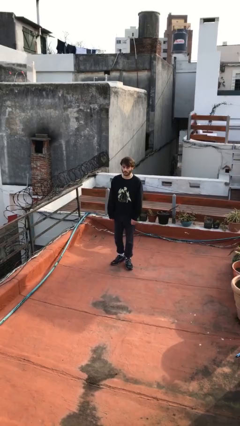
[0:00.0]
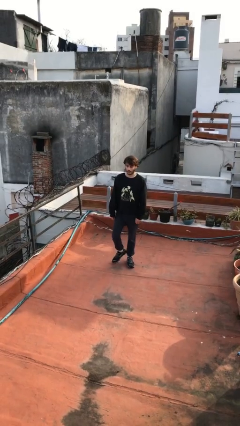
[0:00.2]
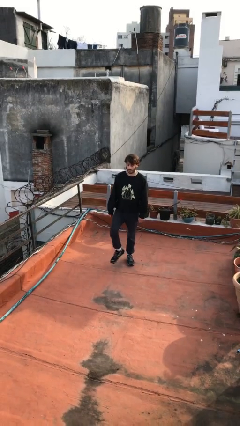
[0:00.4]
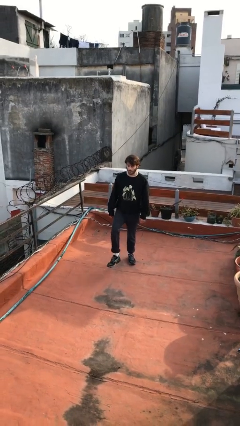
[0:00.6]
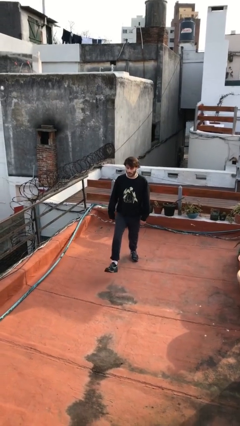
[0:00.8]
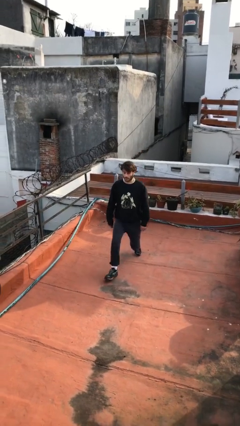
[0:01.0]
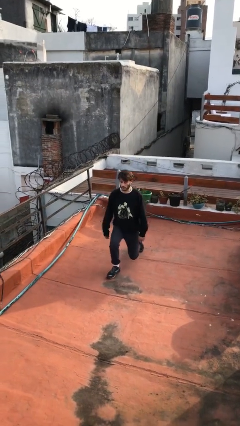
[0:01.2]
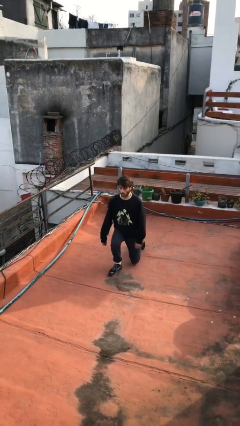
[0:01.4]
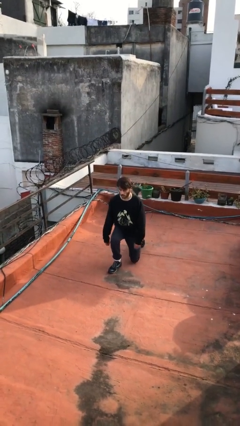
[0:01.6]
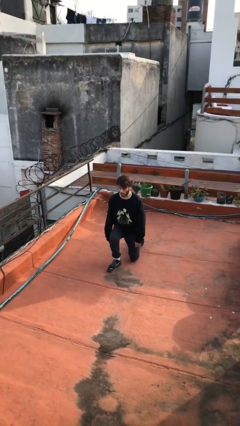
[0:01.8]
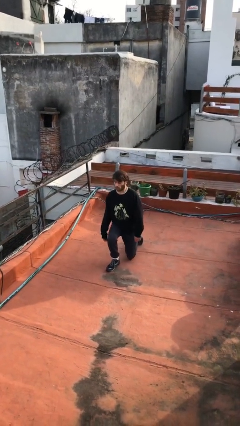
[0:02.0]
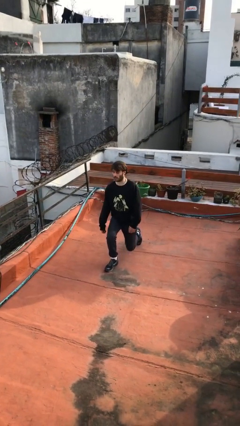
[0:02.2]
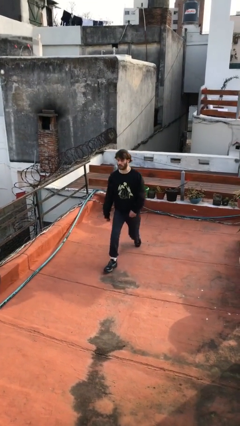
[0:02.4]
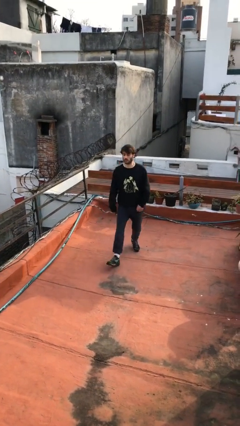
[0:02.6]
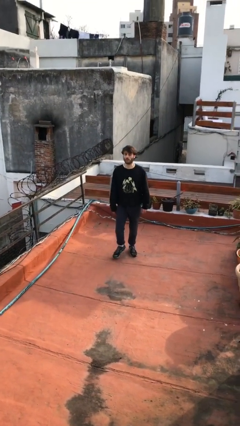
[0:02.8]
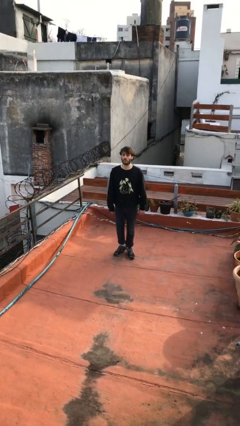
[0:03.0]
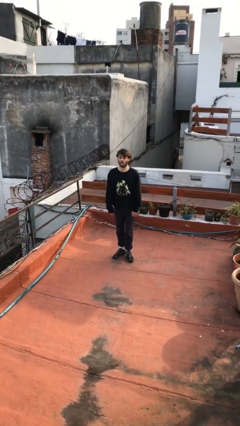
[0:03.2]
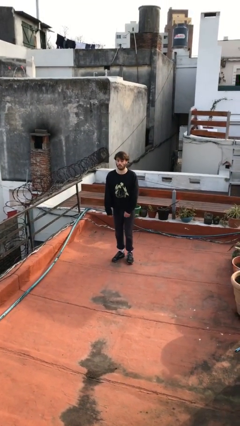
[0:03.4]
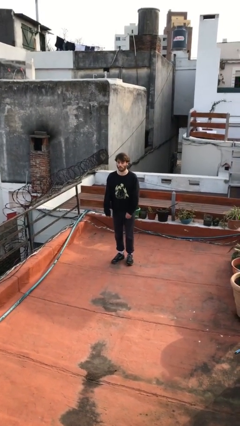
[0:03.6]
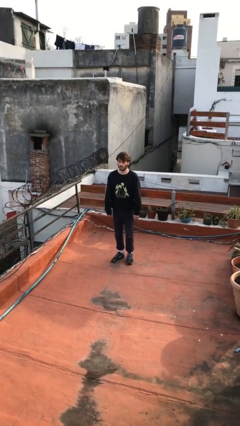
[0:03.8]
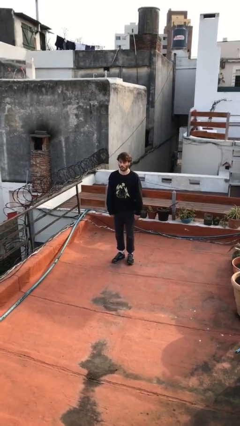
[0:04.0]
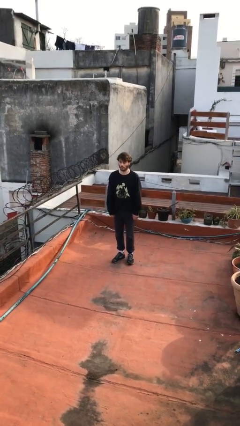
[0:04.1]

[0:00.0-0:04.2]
person exercises with lunges

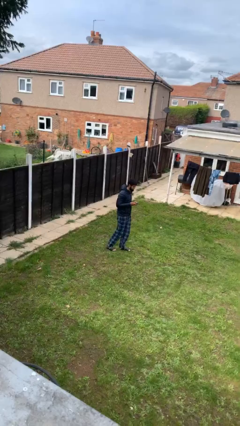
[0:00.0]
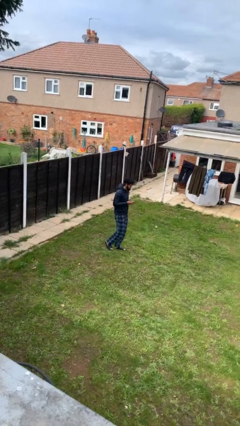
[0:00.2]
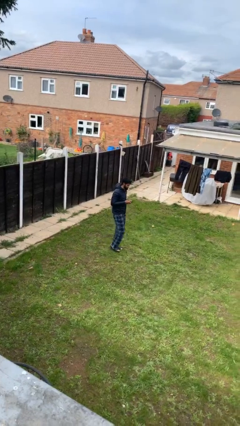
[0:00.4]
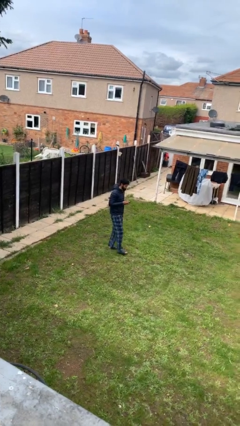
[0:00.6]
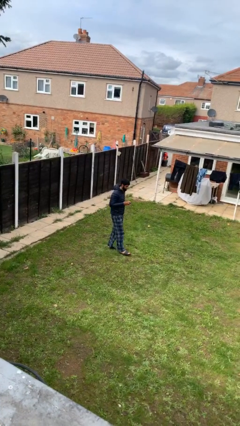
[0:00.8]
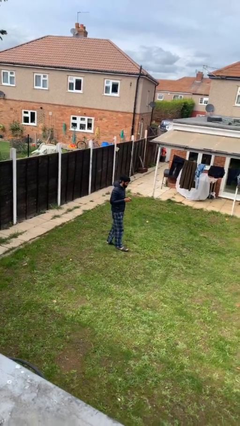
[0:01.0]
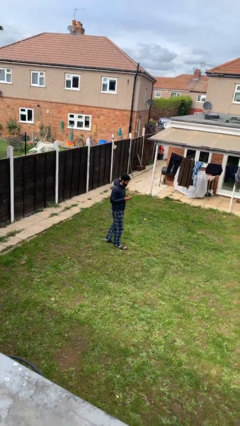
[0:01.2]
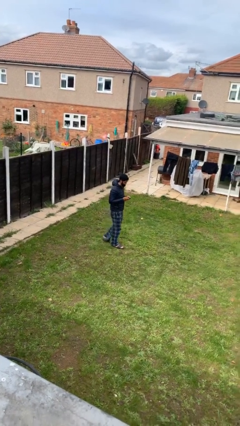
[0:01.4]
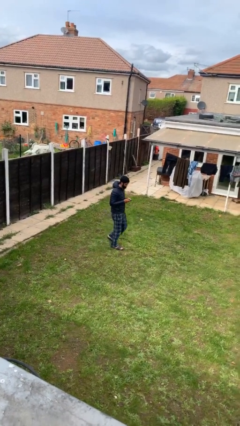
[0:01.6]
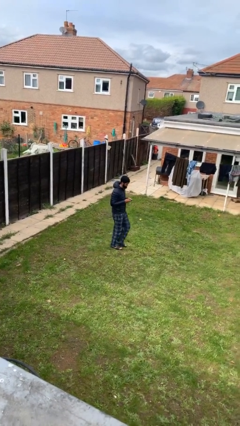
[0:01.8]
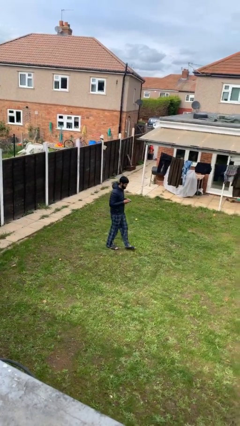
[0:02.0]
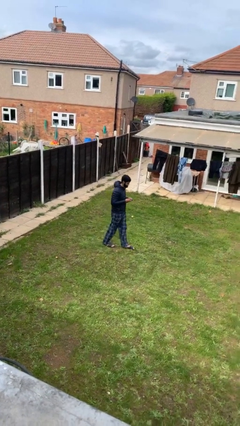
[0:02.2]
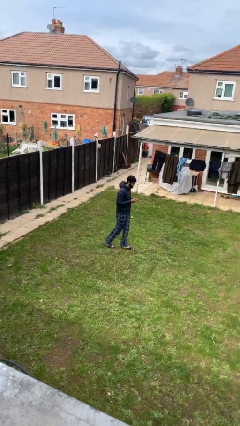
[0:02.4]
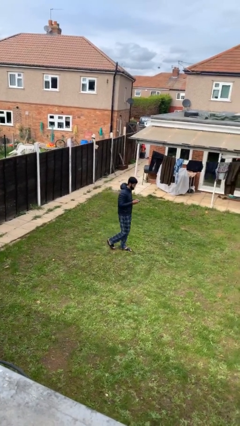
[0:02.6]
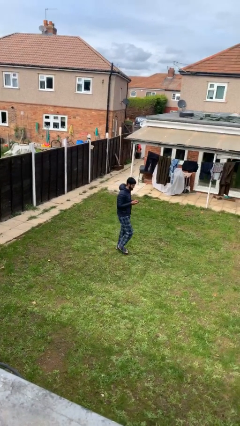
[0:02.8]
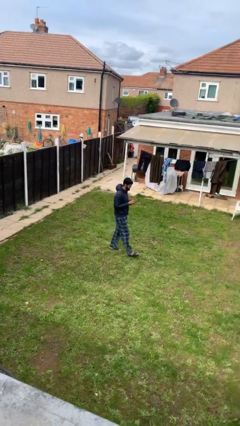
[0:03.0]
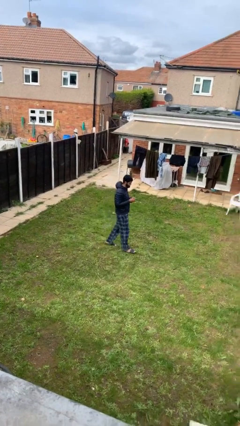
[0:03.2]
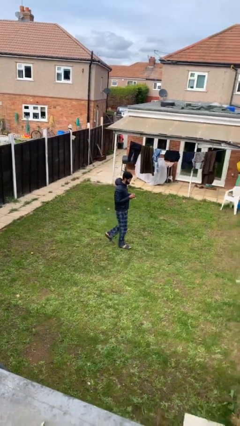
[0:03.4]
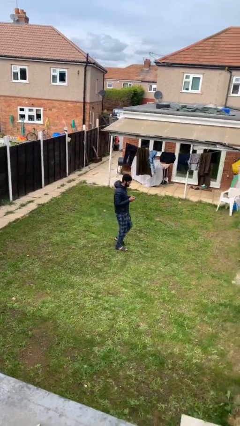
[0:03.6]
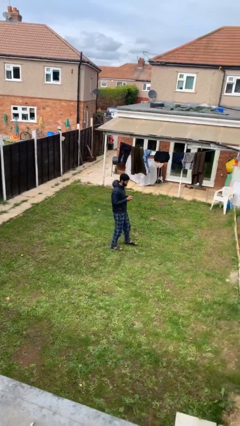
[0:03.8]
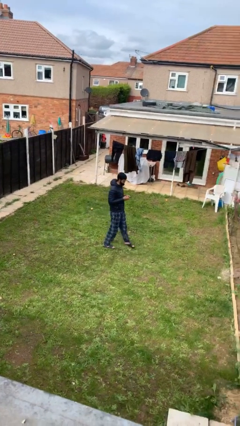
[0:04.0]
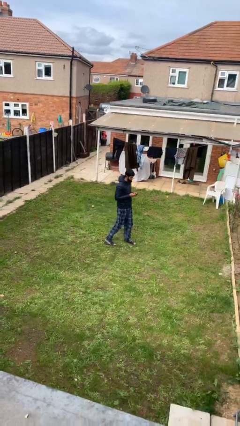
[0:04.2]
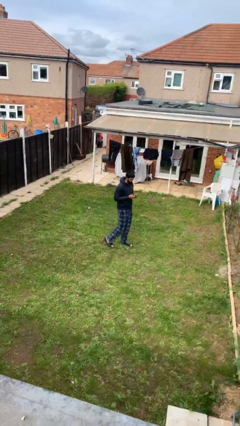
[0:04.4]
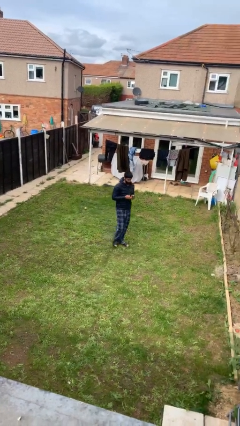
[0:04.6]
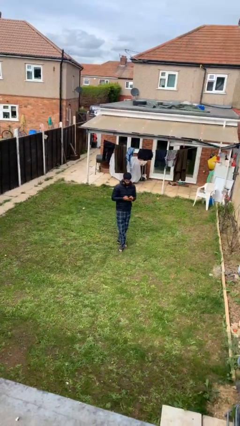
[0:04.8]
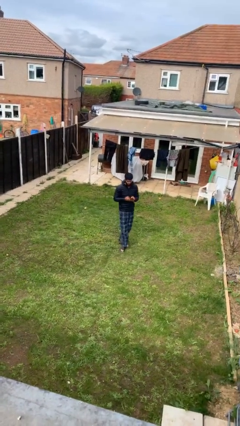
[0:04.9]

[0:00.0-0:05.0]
person texts on phone

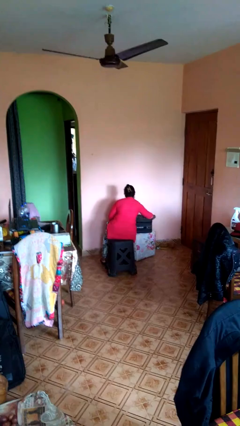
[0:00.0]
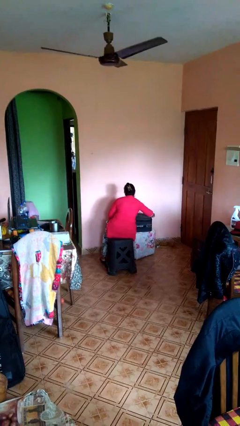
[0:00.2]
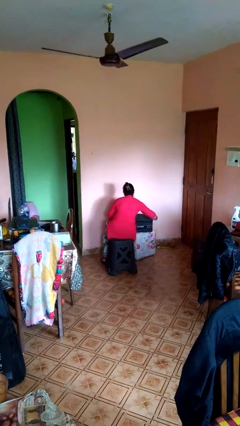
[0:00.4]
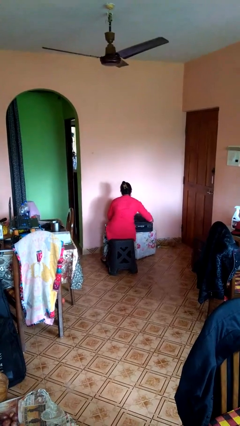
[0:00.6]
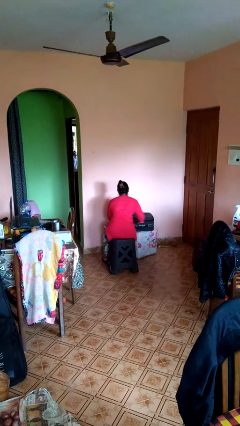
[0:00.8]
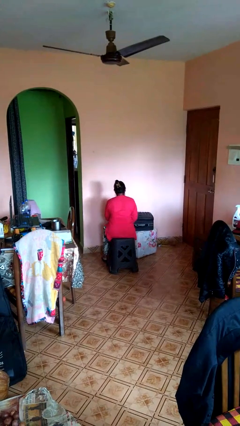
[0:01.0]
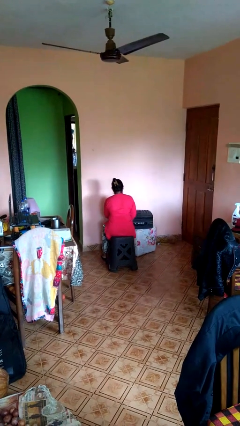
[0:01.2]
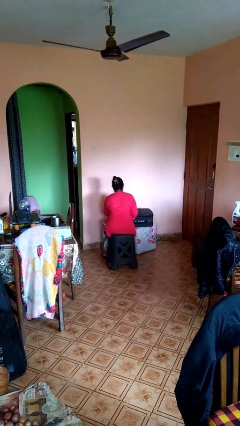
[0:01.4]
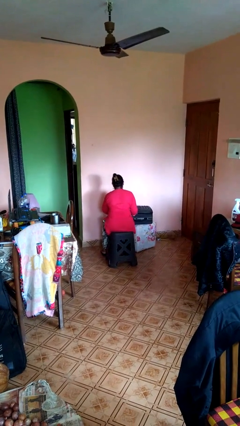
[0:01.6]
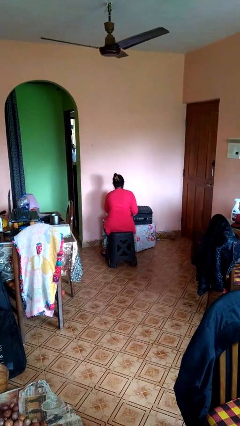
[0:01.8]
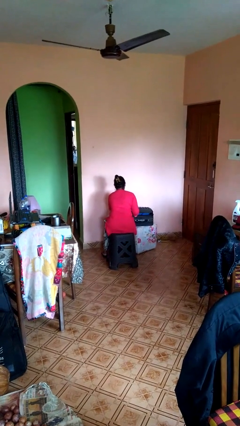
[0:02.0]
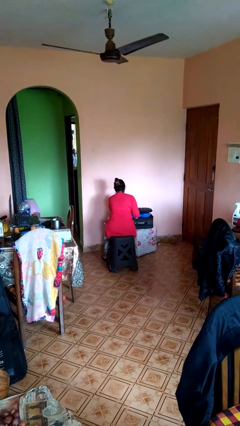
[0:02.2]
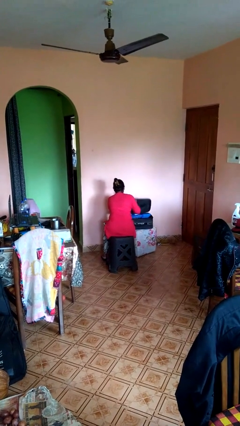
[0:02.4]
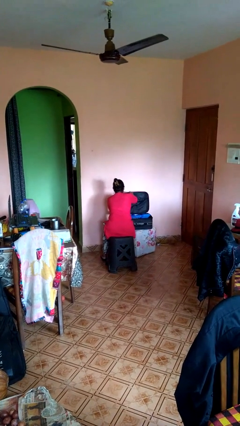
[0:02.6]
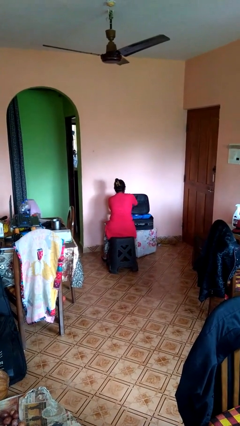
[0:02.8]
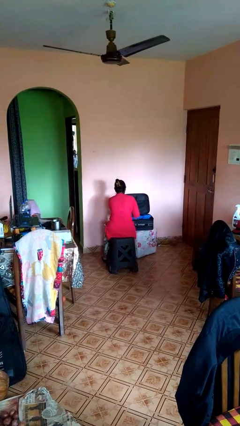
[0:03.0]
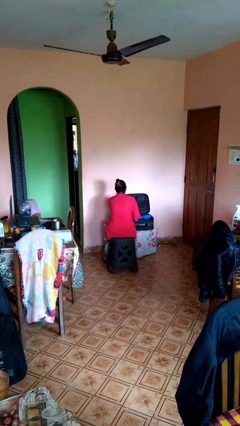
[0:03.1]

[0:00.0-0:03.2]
person opens suitcase

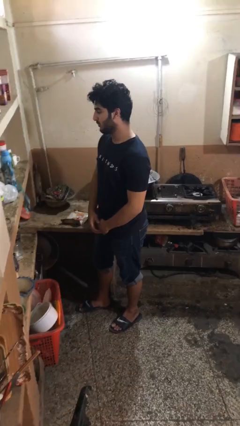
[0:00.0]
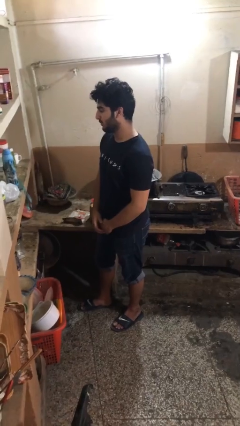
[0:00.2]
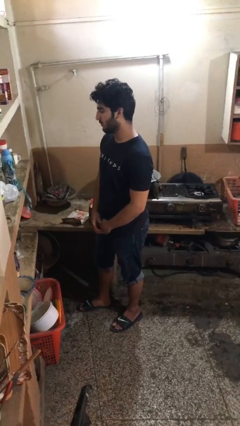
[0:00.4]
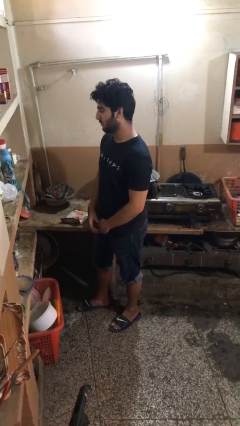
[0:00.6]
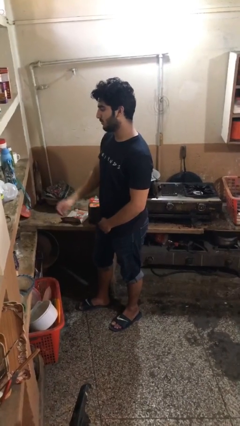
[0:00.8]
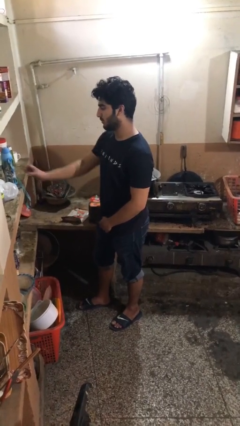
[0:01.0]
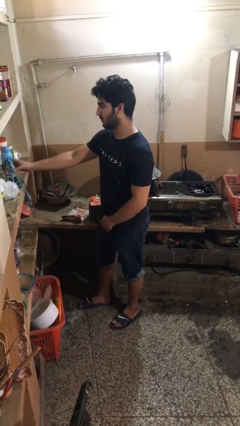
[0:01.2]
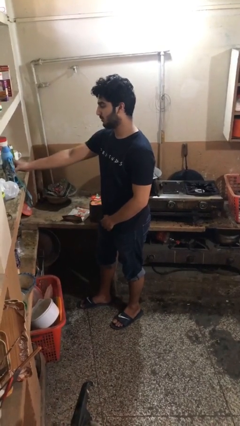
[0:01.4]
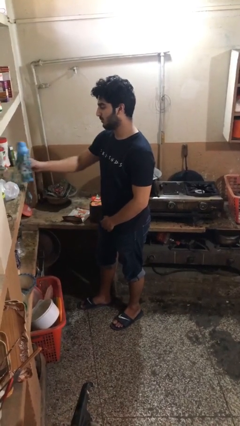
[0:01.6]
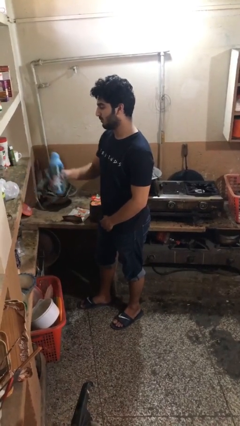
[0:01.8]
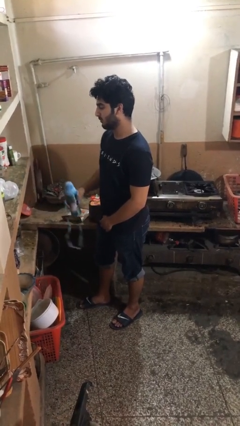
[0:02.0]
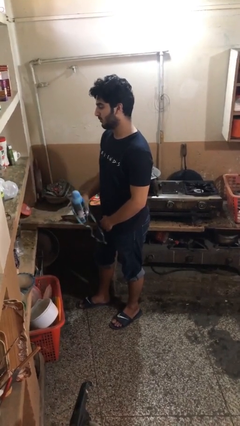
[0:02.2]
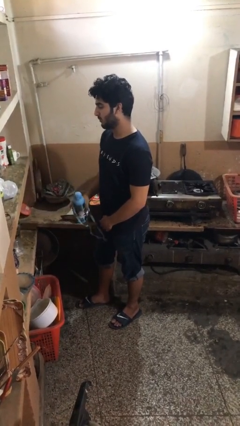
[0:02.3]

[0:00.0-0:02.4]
person picks up object from countertop

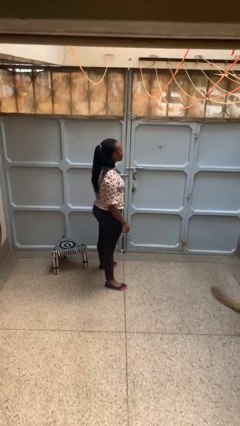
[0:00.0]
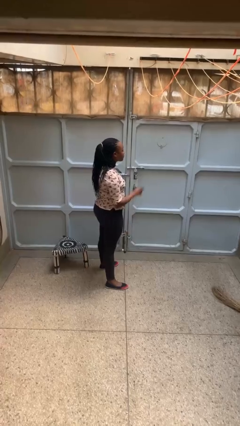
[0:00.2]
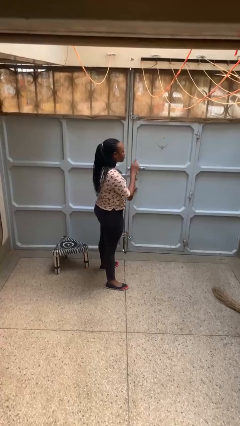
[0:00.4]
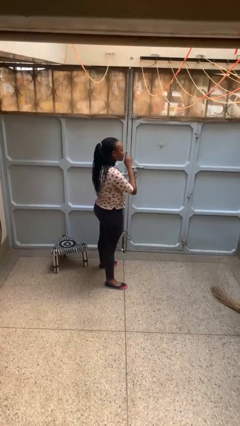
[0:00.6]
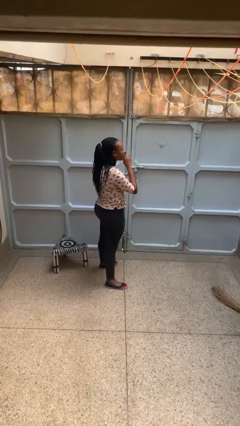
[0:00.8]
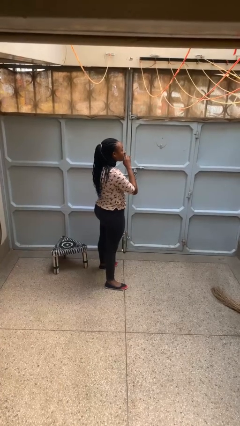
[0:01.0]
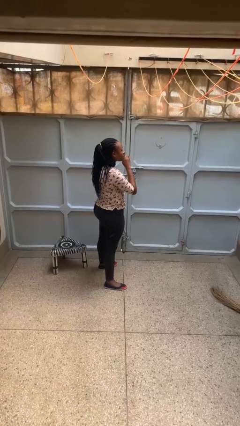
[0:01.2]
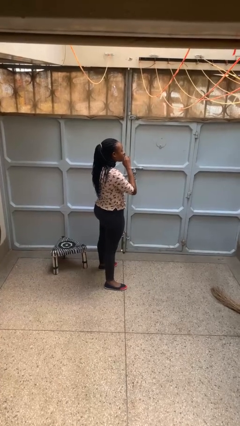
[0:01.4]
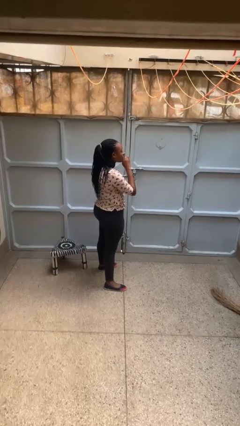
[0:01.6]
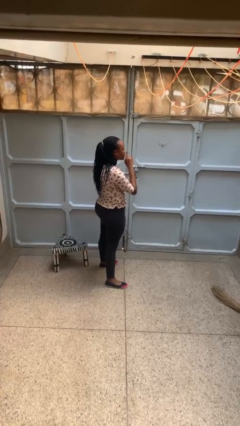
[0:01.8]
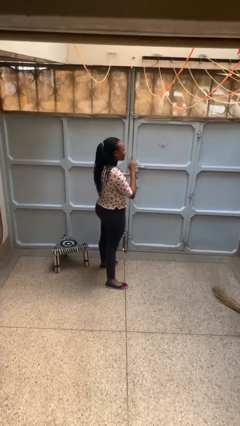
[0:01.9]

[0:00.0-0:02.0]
person gestures be quiet

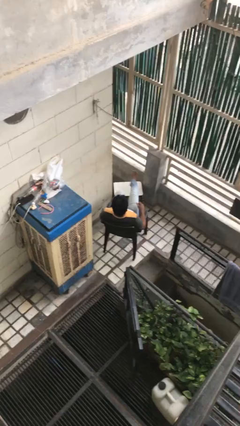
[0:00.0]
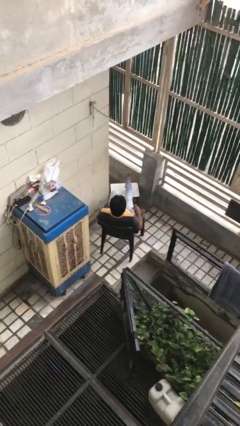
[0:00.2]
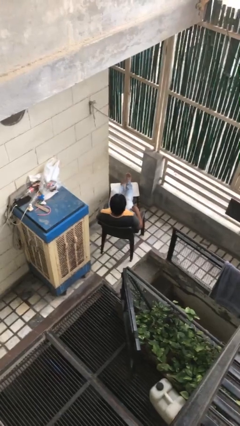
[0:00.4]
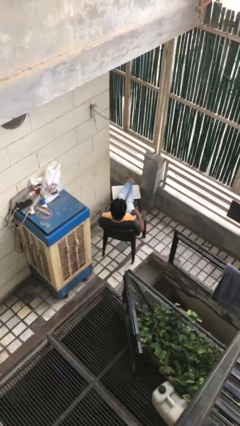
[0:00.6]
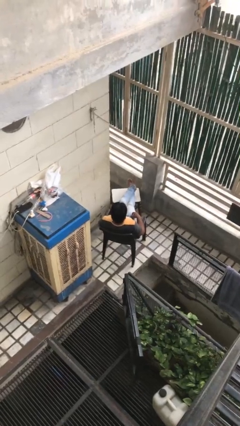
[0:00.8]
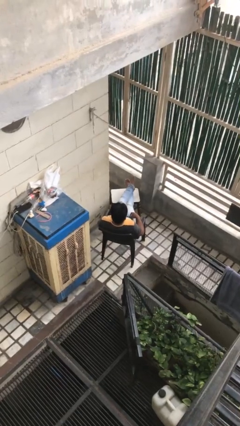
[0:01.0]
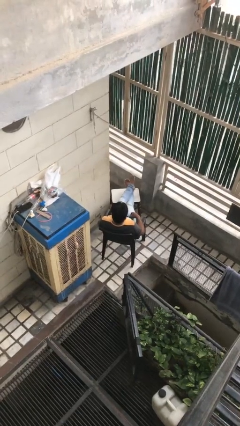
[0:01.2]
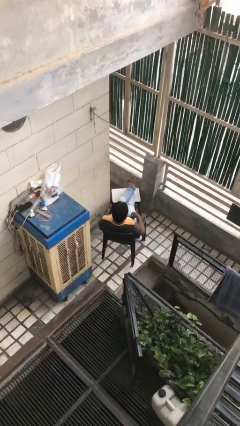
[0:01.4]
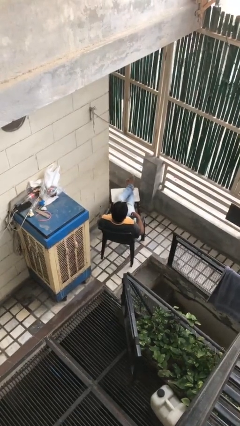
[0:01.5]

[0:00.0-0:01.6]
person puts feet up
